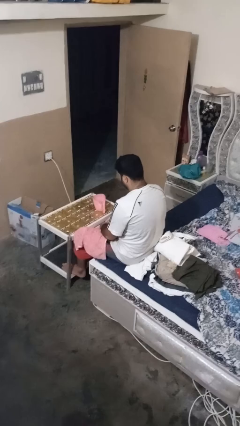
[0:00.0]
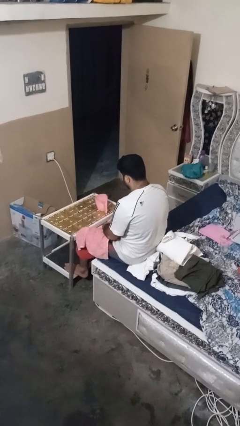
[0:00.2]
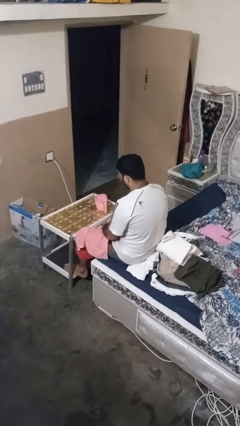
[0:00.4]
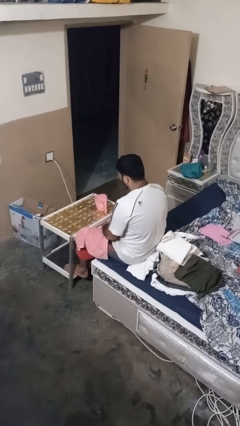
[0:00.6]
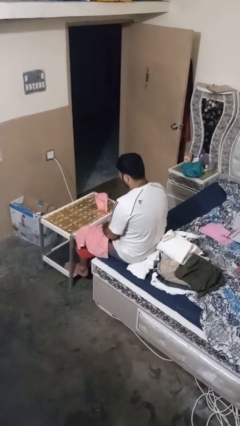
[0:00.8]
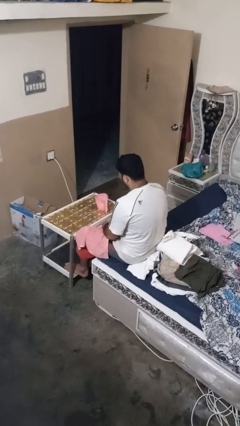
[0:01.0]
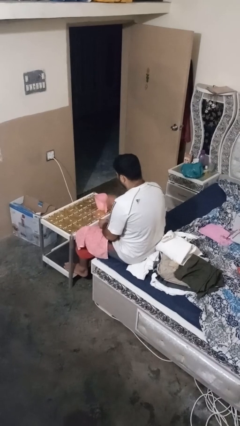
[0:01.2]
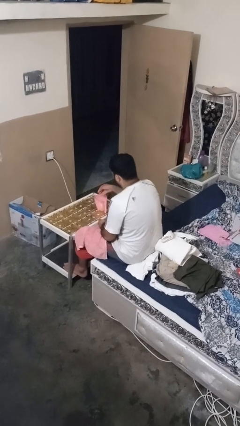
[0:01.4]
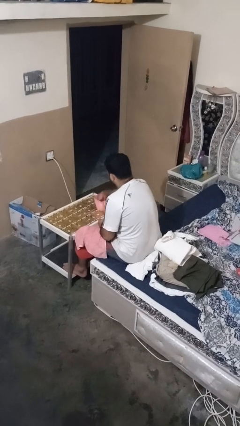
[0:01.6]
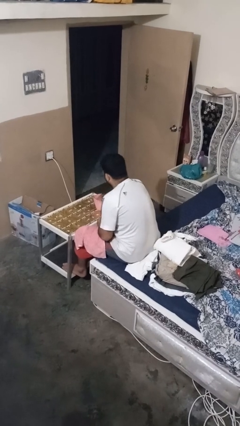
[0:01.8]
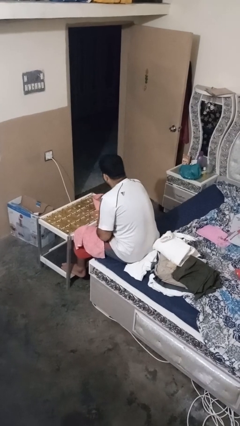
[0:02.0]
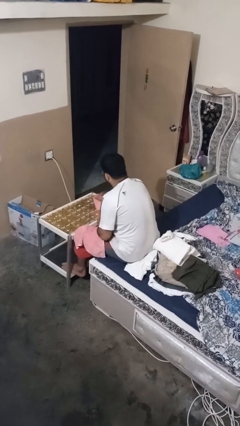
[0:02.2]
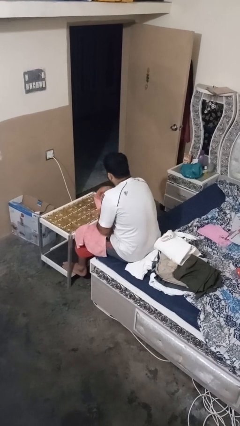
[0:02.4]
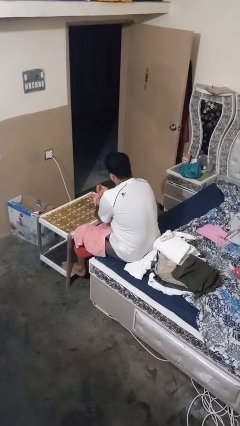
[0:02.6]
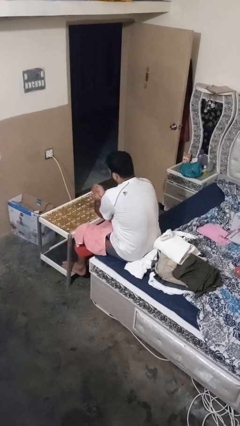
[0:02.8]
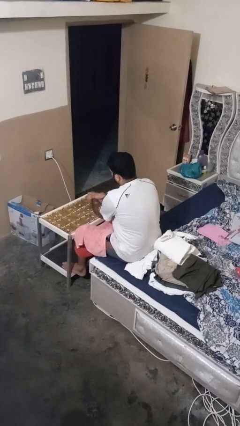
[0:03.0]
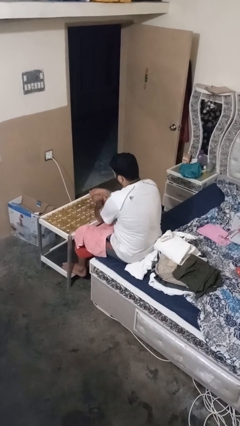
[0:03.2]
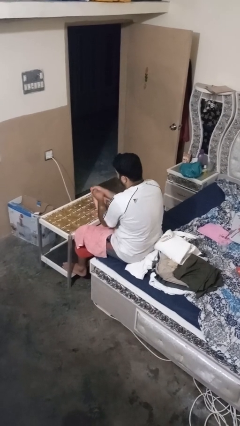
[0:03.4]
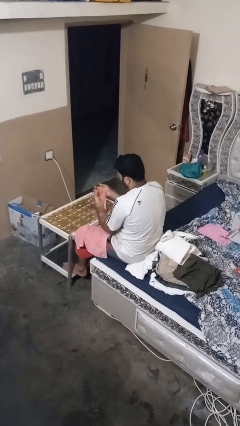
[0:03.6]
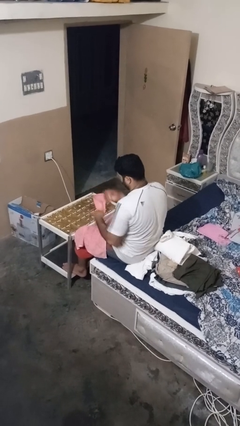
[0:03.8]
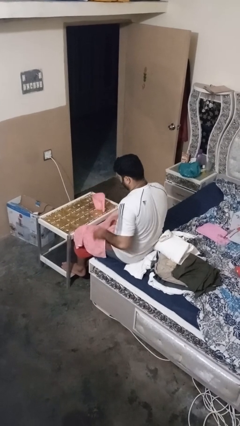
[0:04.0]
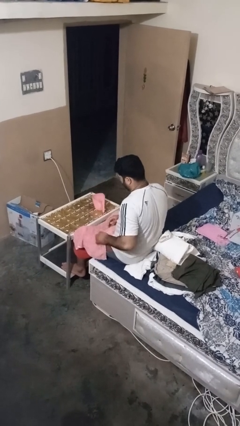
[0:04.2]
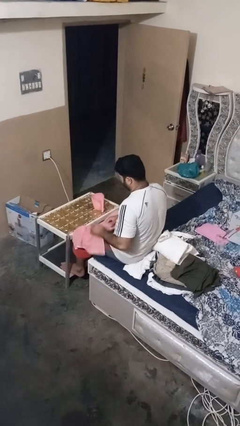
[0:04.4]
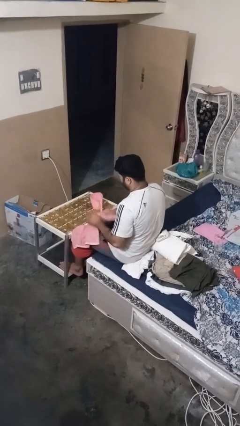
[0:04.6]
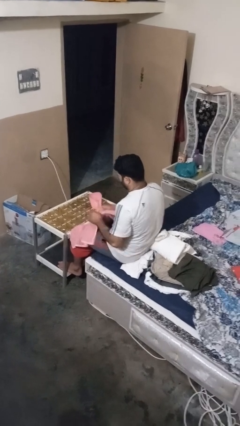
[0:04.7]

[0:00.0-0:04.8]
person washes hands

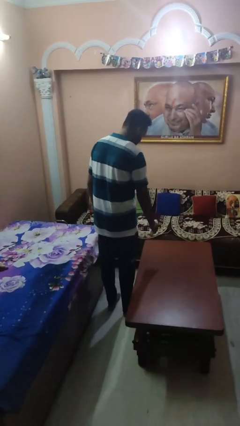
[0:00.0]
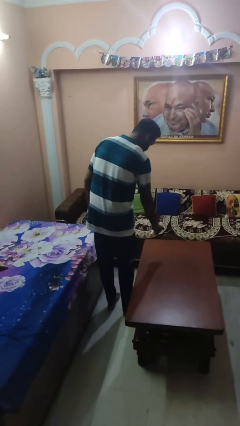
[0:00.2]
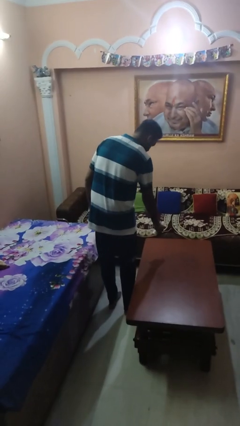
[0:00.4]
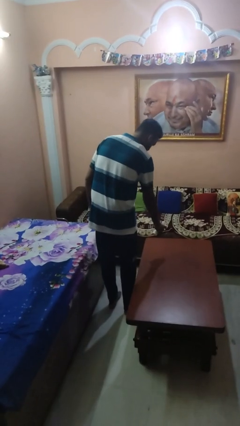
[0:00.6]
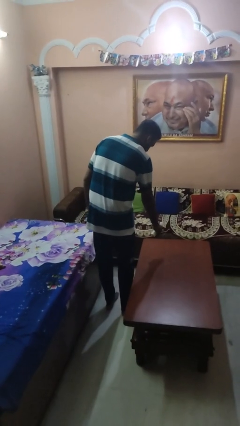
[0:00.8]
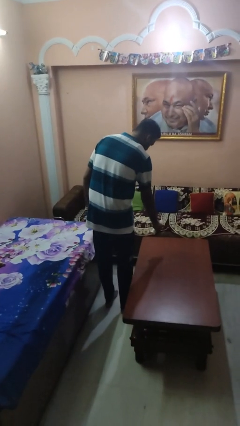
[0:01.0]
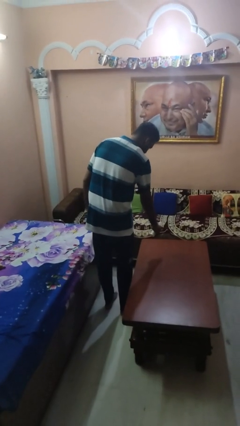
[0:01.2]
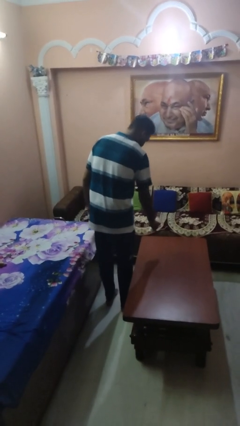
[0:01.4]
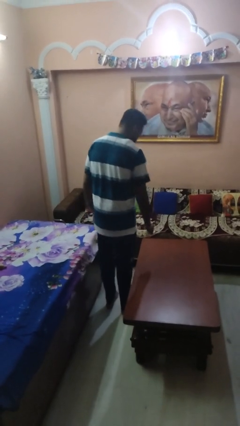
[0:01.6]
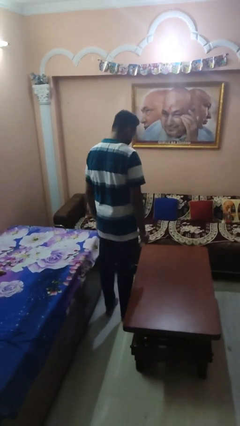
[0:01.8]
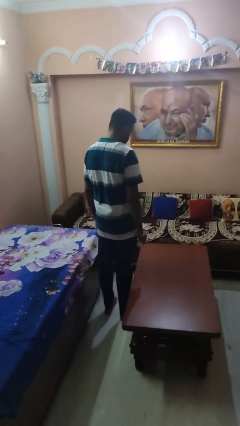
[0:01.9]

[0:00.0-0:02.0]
person sprays from bottle

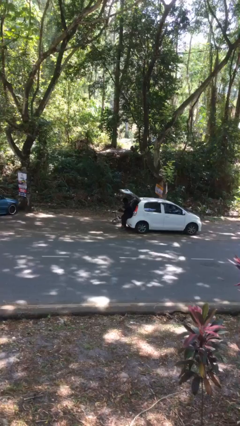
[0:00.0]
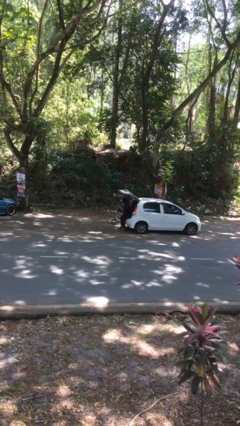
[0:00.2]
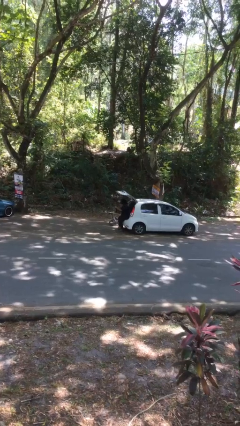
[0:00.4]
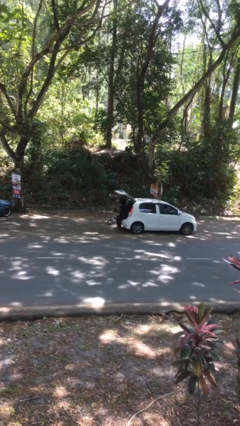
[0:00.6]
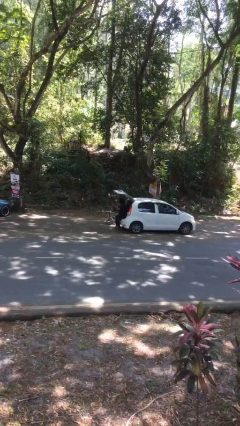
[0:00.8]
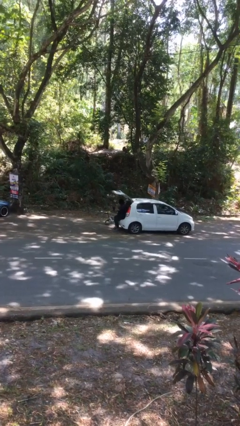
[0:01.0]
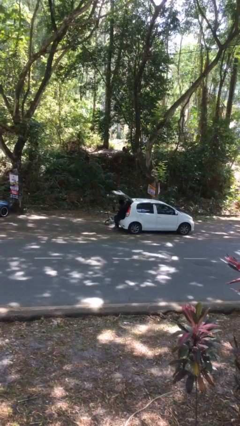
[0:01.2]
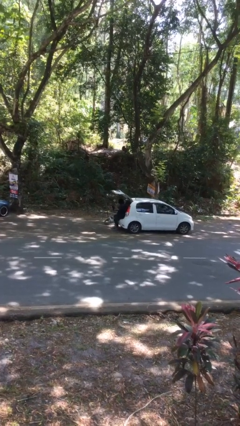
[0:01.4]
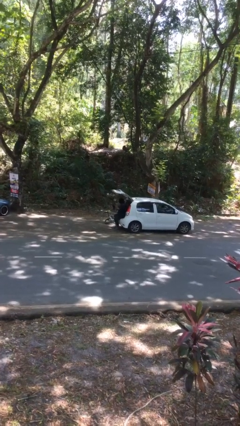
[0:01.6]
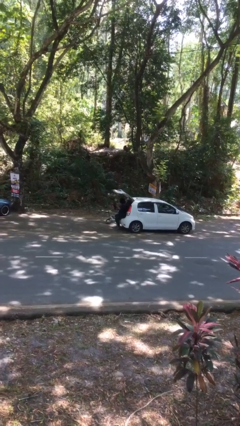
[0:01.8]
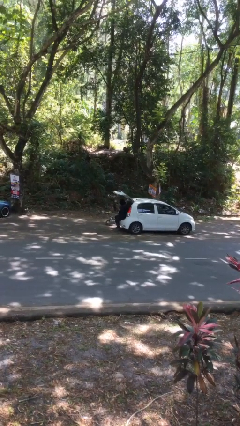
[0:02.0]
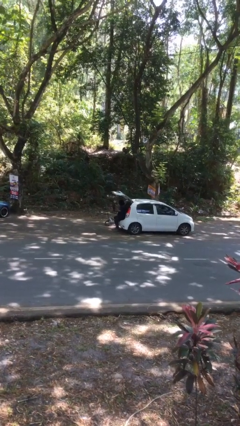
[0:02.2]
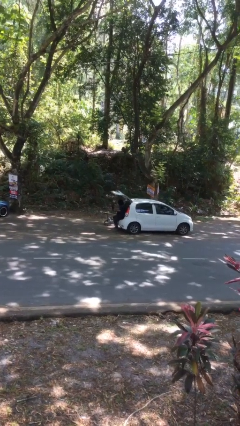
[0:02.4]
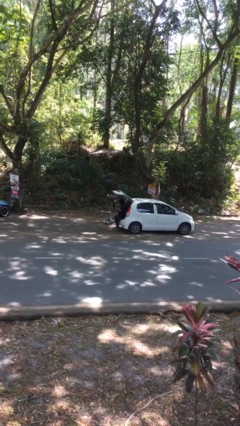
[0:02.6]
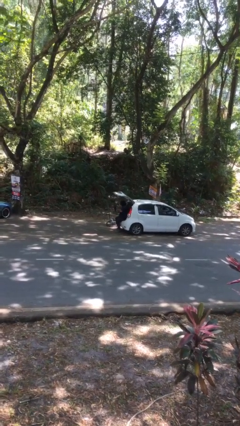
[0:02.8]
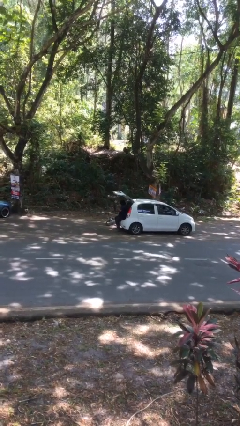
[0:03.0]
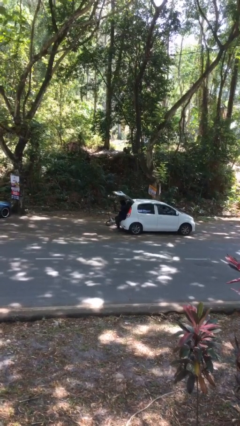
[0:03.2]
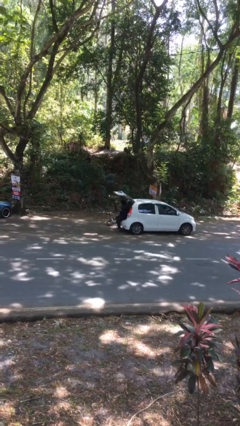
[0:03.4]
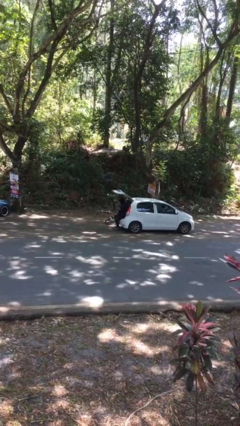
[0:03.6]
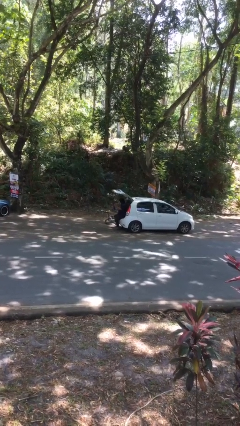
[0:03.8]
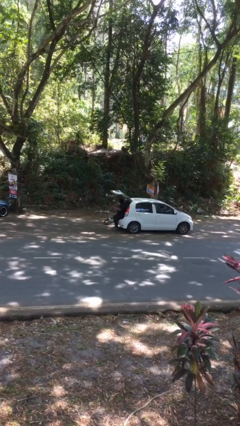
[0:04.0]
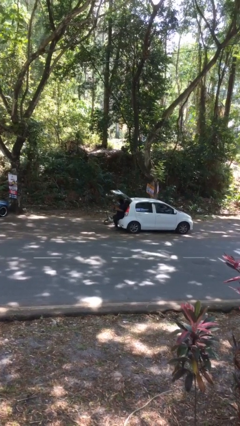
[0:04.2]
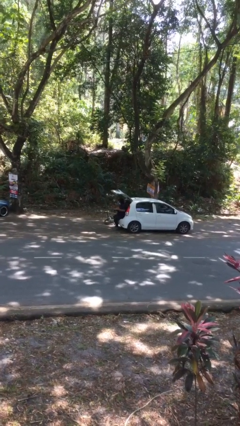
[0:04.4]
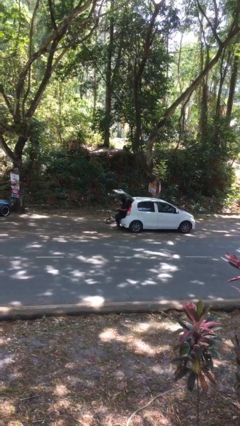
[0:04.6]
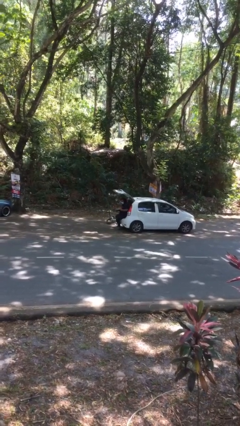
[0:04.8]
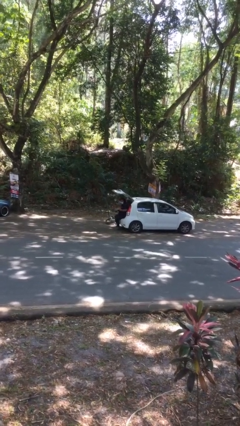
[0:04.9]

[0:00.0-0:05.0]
person interacts with laptop

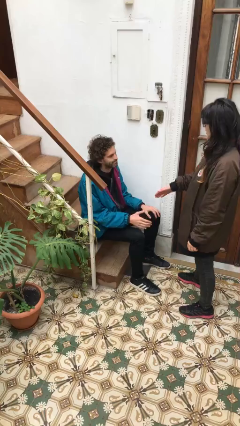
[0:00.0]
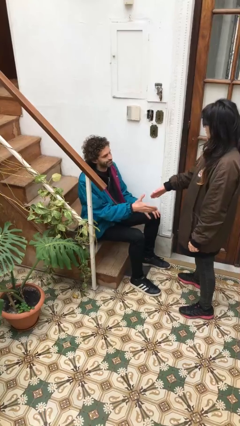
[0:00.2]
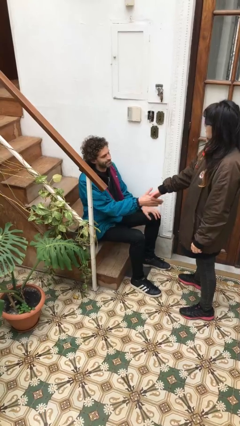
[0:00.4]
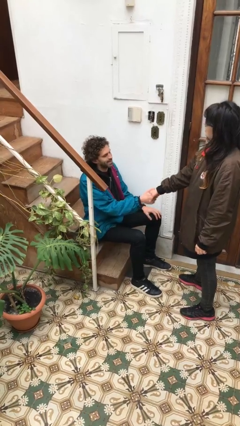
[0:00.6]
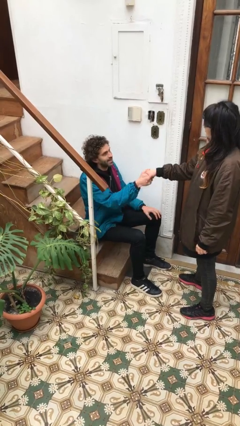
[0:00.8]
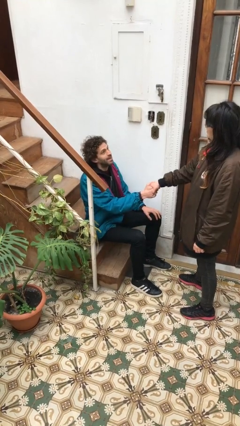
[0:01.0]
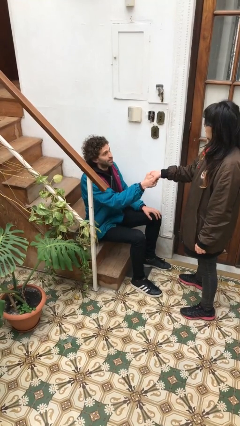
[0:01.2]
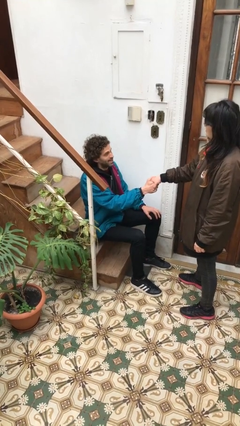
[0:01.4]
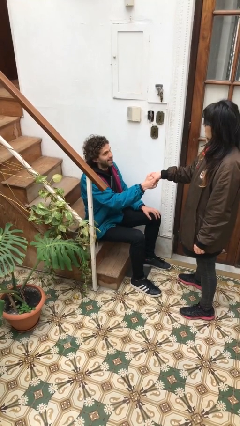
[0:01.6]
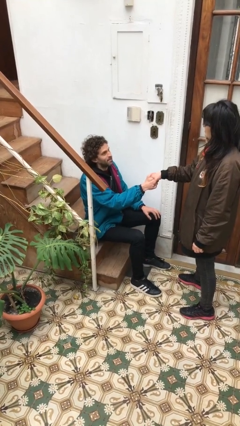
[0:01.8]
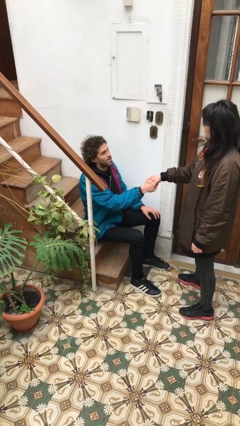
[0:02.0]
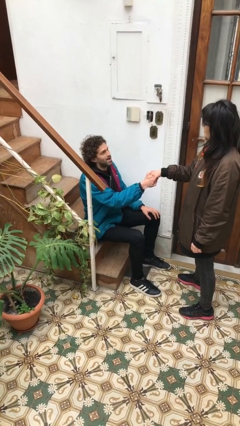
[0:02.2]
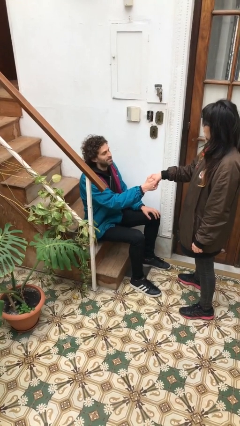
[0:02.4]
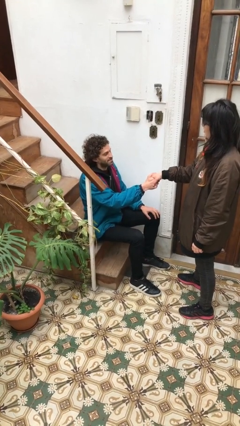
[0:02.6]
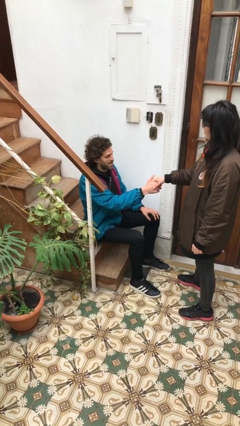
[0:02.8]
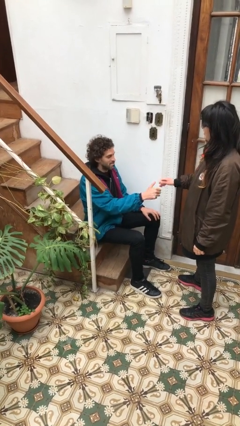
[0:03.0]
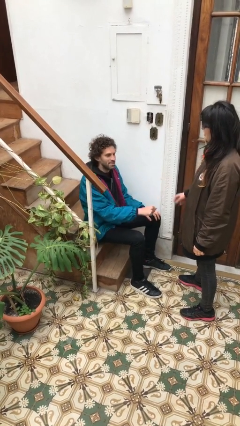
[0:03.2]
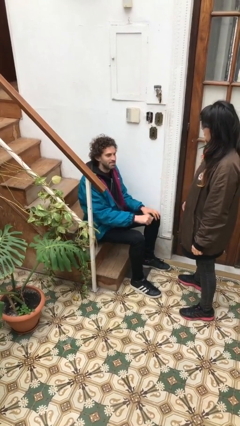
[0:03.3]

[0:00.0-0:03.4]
person shakes hand

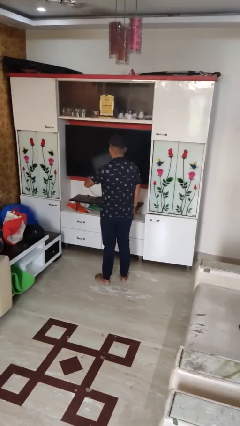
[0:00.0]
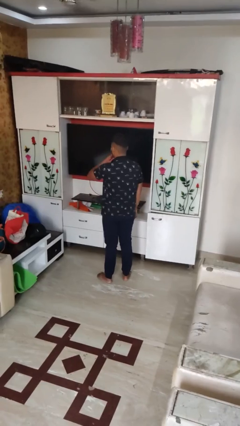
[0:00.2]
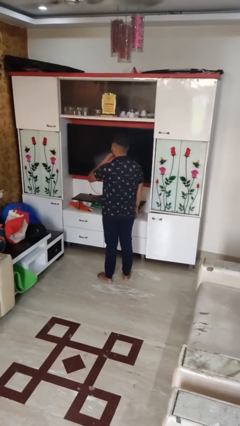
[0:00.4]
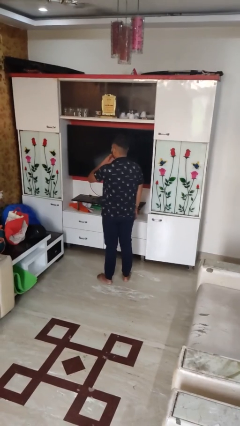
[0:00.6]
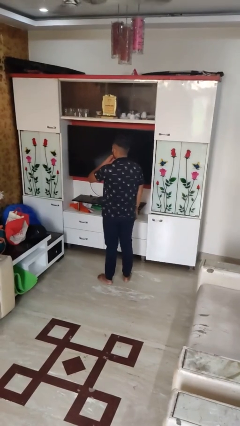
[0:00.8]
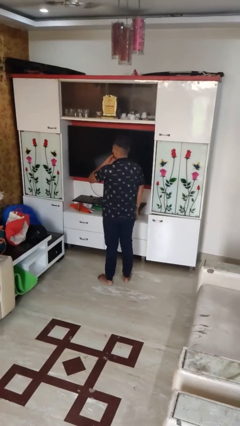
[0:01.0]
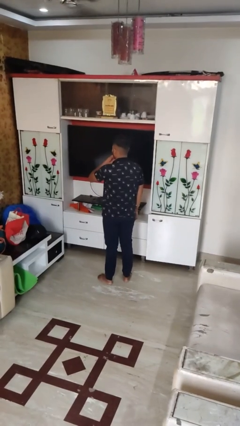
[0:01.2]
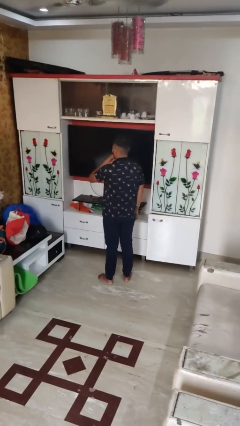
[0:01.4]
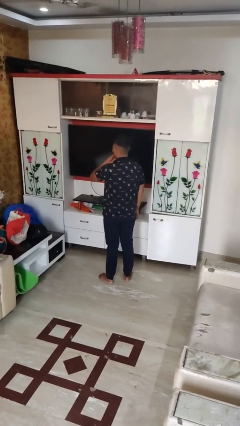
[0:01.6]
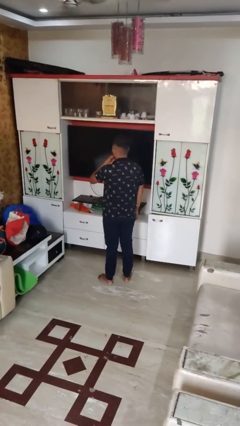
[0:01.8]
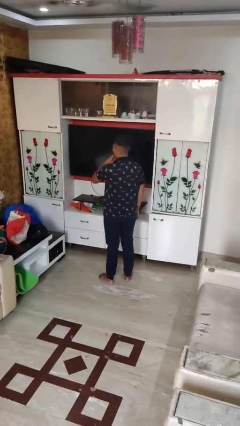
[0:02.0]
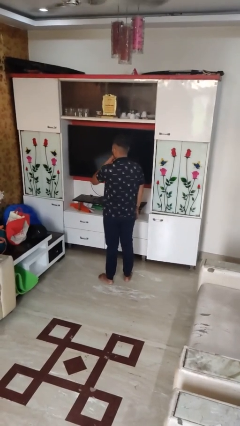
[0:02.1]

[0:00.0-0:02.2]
person strokes chin

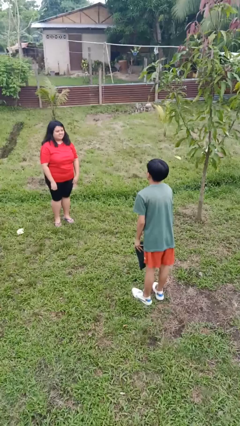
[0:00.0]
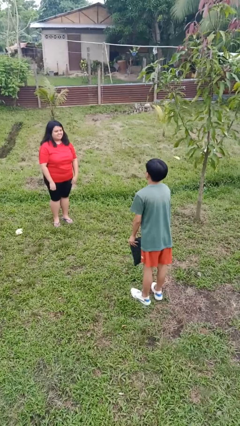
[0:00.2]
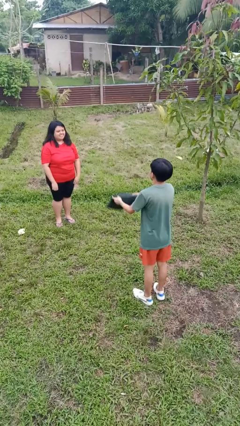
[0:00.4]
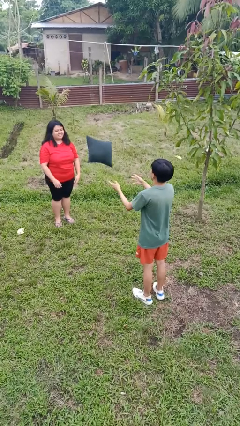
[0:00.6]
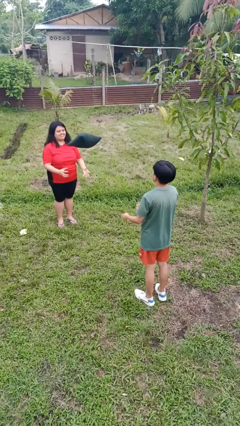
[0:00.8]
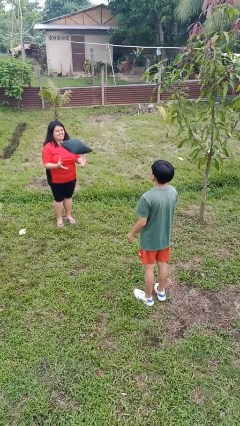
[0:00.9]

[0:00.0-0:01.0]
person catches object from person
